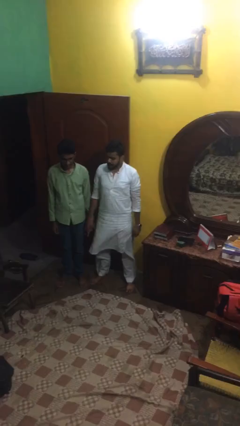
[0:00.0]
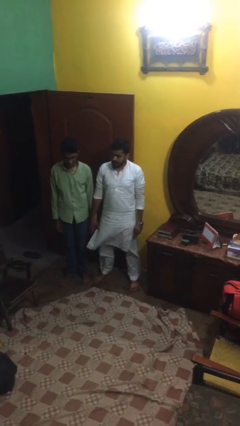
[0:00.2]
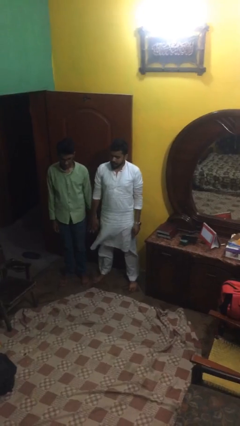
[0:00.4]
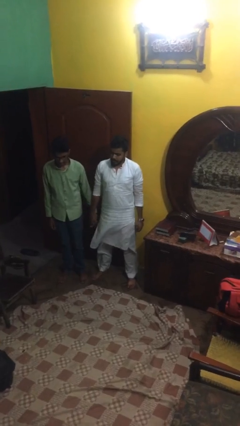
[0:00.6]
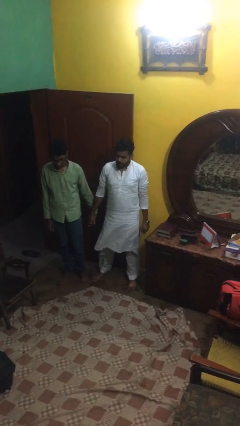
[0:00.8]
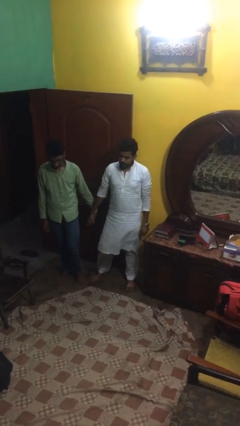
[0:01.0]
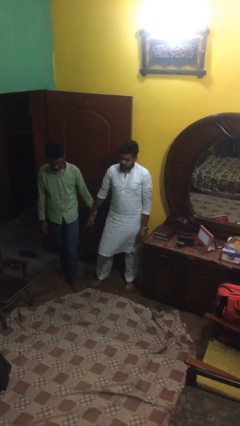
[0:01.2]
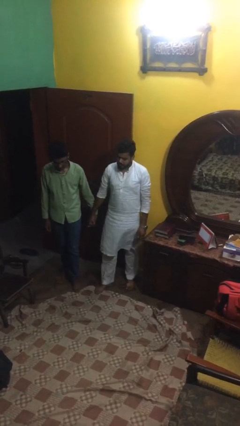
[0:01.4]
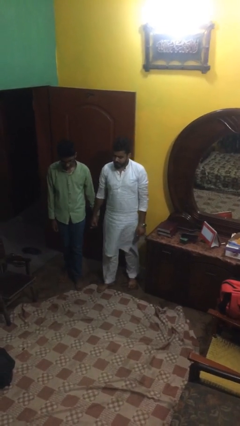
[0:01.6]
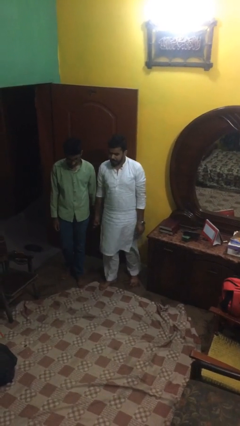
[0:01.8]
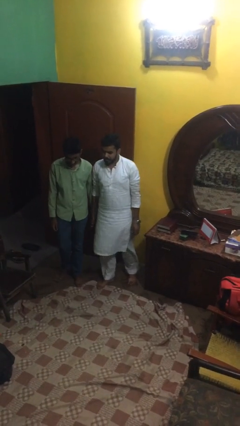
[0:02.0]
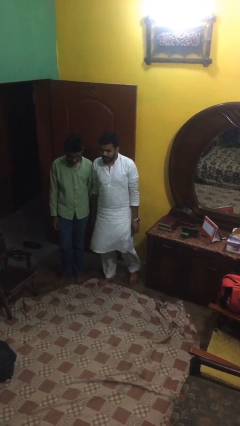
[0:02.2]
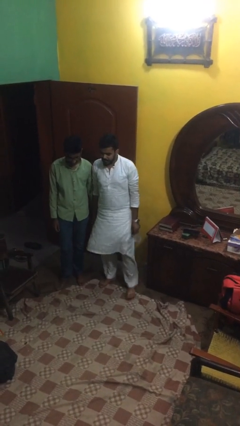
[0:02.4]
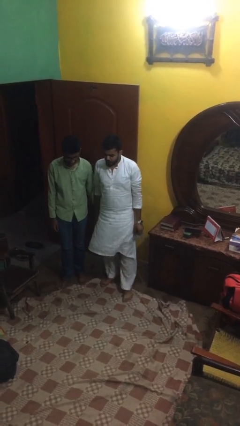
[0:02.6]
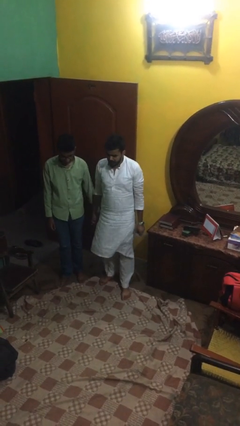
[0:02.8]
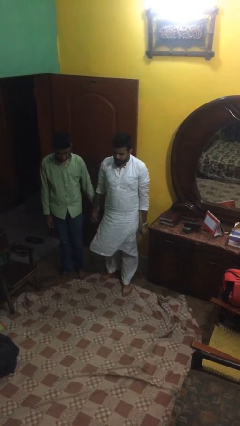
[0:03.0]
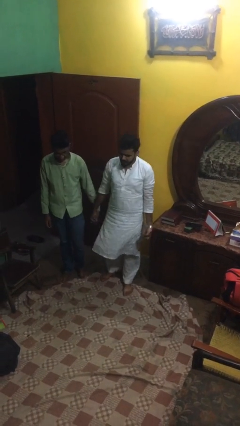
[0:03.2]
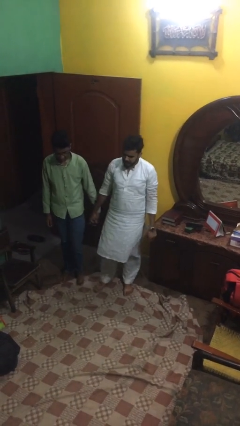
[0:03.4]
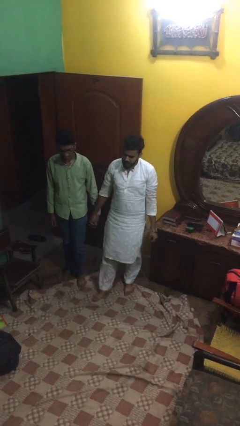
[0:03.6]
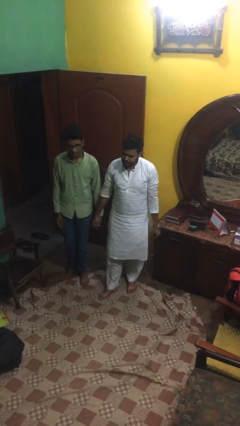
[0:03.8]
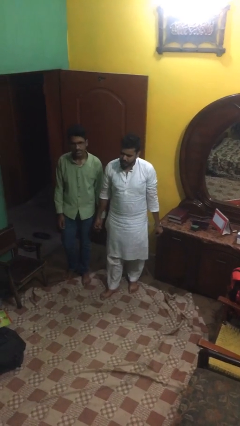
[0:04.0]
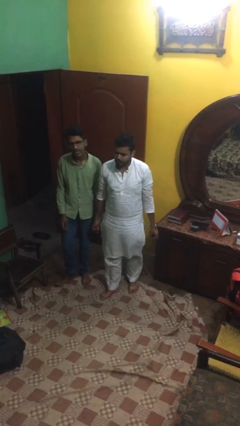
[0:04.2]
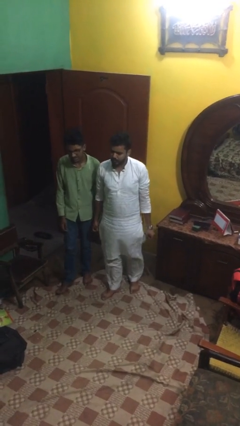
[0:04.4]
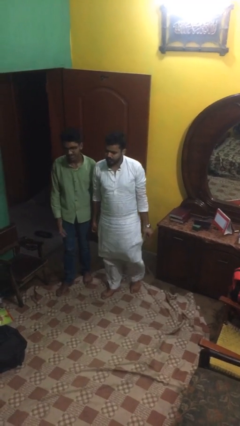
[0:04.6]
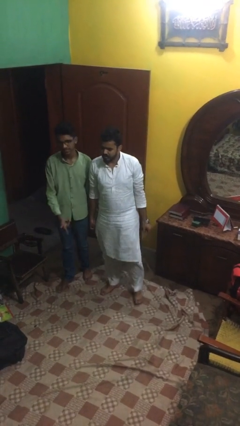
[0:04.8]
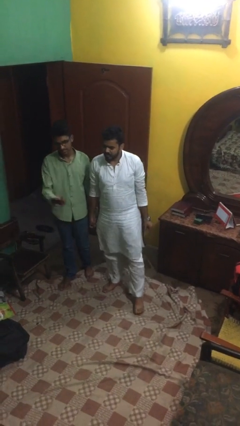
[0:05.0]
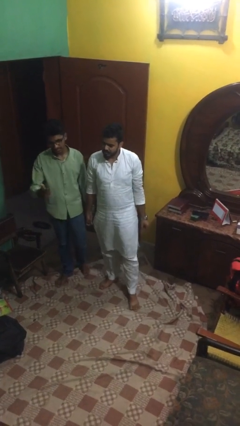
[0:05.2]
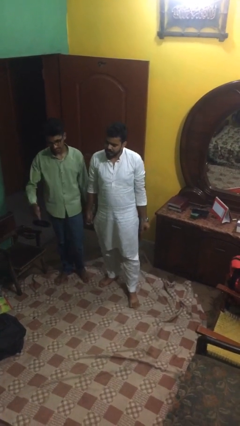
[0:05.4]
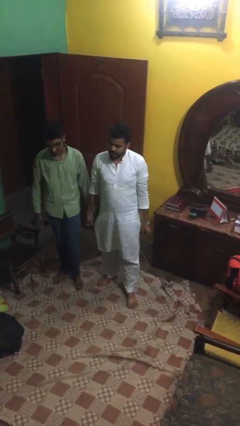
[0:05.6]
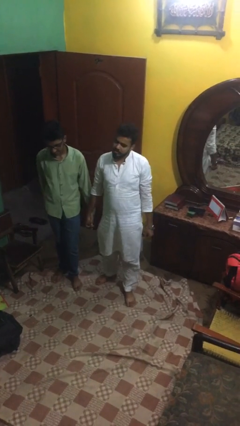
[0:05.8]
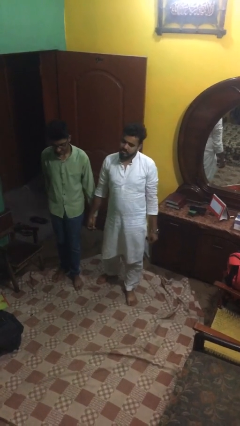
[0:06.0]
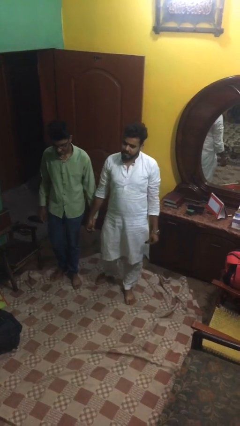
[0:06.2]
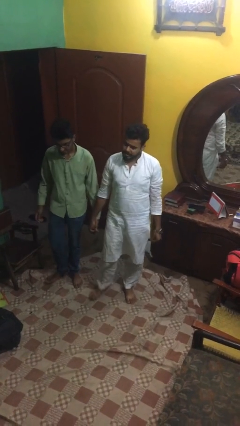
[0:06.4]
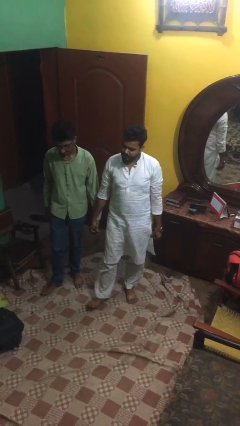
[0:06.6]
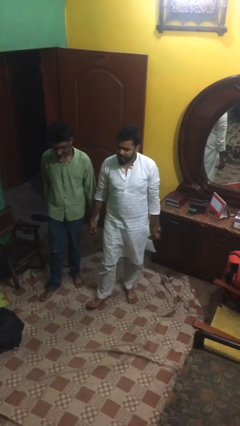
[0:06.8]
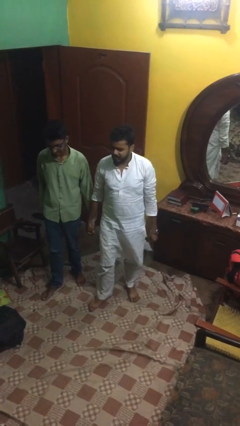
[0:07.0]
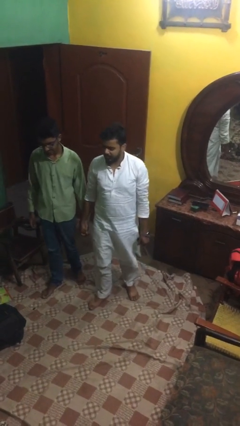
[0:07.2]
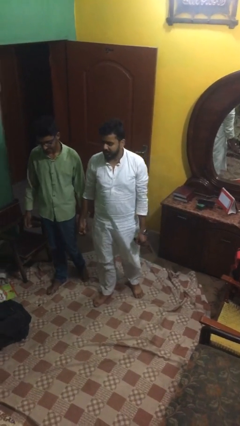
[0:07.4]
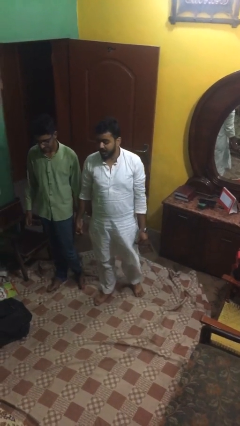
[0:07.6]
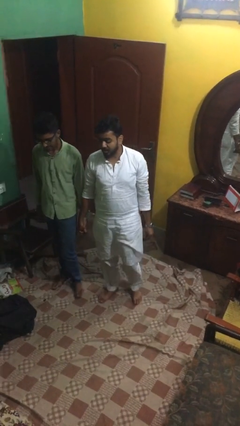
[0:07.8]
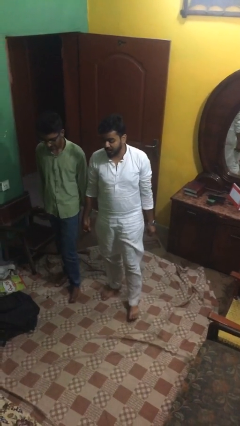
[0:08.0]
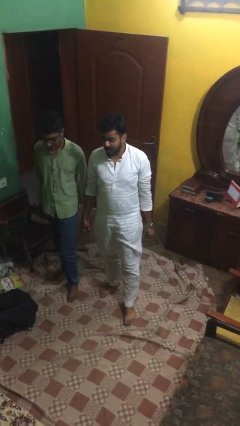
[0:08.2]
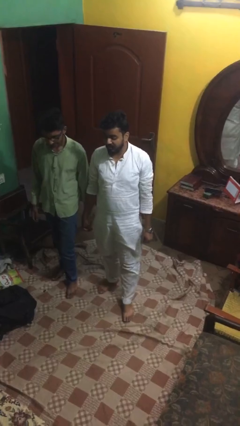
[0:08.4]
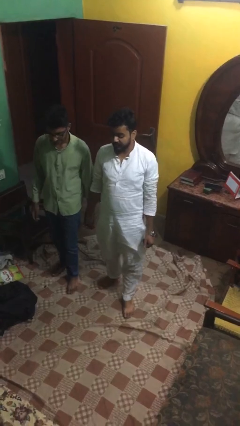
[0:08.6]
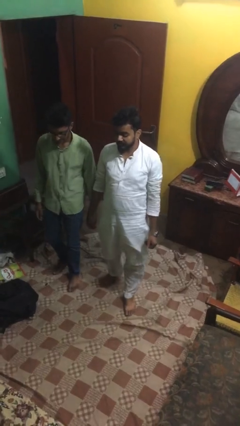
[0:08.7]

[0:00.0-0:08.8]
person holds hand

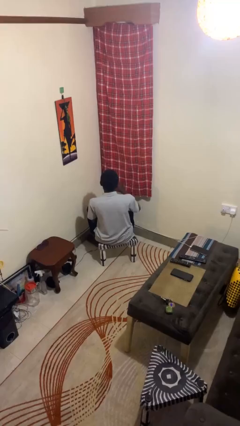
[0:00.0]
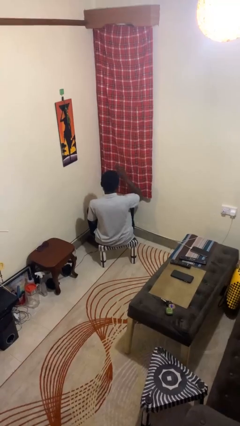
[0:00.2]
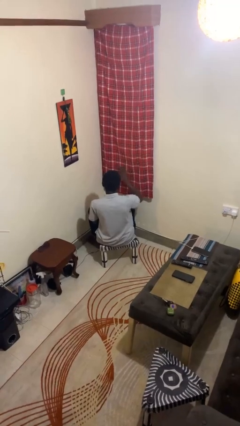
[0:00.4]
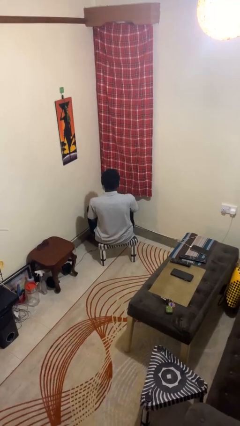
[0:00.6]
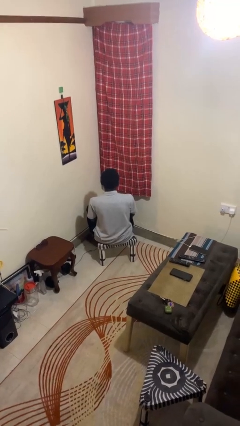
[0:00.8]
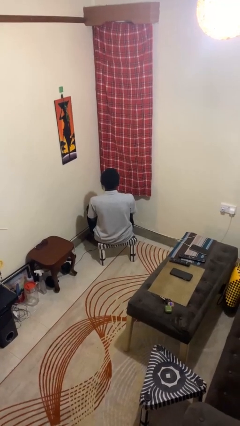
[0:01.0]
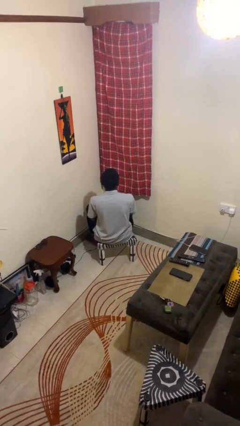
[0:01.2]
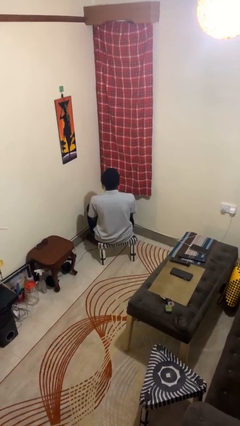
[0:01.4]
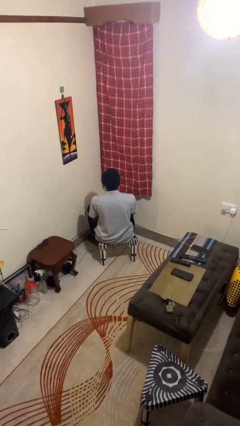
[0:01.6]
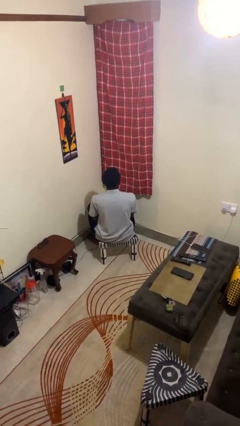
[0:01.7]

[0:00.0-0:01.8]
person gestures swipe down

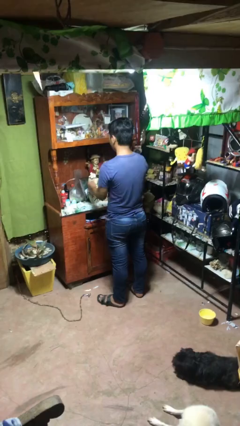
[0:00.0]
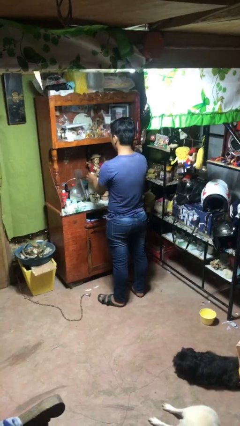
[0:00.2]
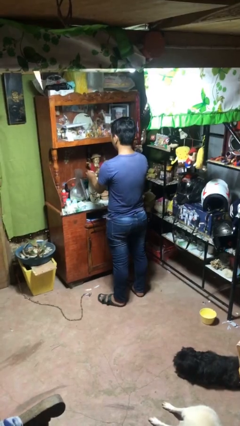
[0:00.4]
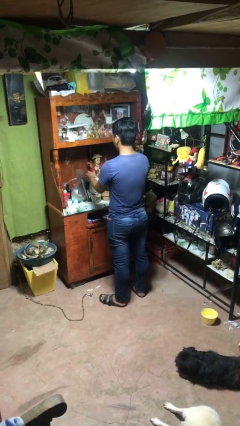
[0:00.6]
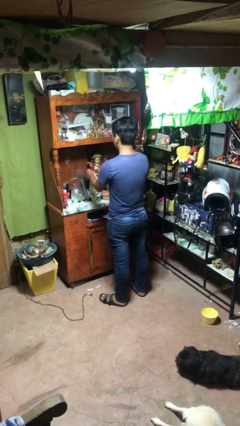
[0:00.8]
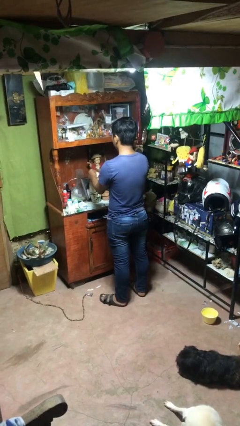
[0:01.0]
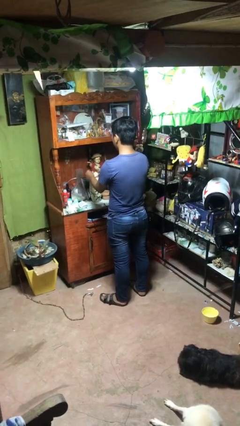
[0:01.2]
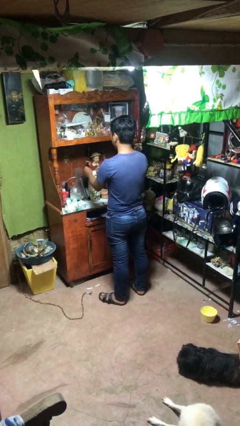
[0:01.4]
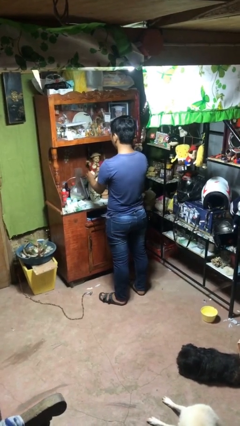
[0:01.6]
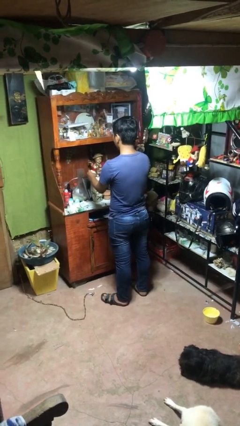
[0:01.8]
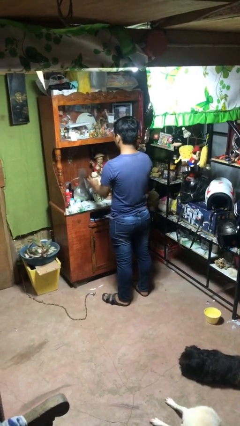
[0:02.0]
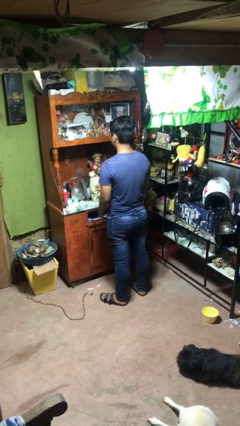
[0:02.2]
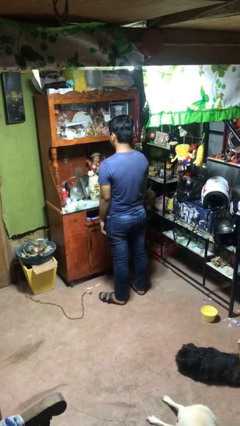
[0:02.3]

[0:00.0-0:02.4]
person arranges flowers in vase

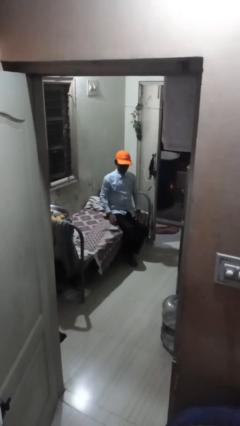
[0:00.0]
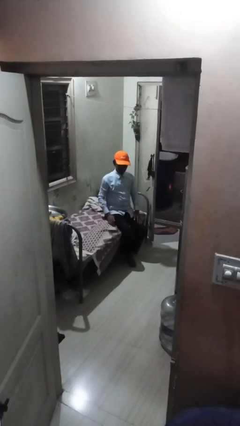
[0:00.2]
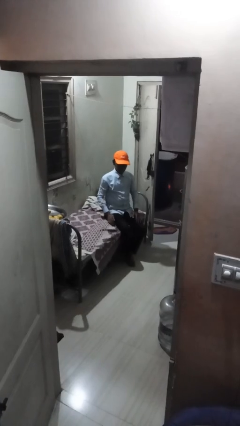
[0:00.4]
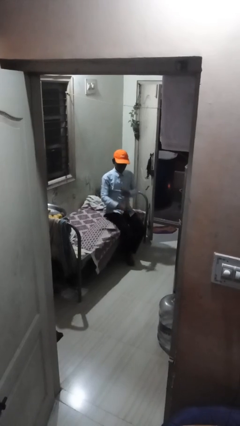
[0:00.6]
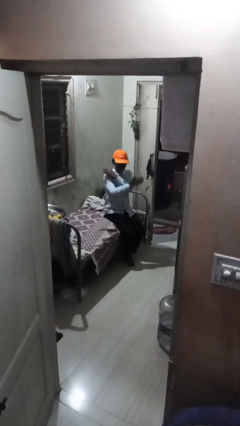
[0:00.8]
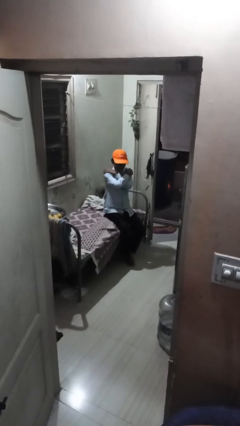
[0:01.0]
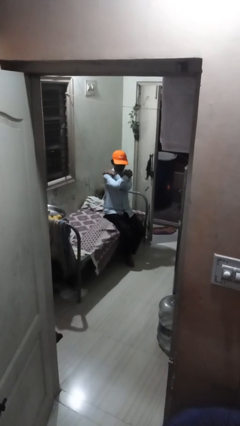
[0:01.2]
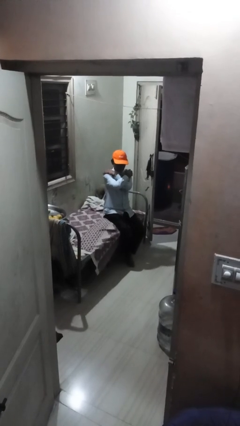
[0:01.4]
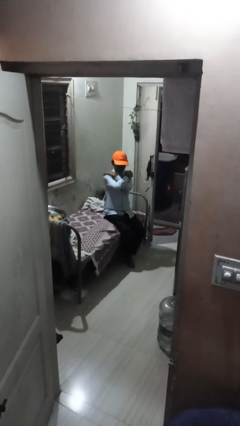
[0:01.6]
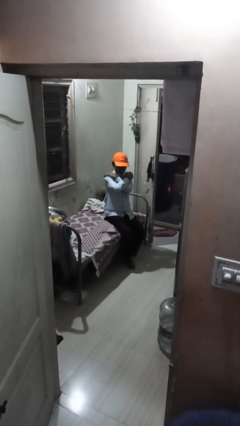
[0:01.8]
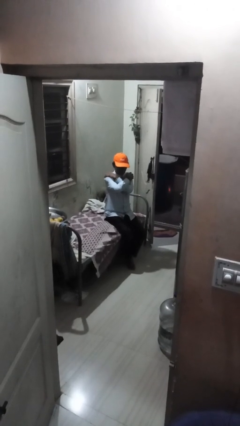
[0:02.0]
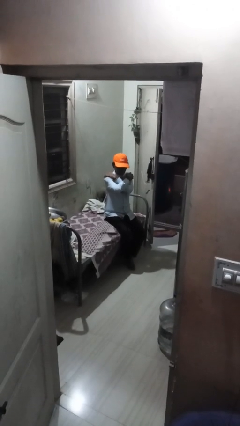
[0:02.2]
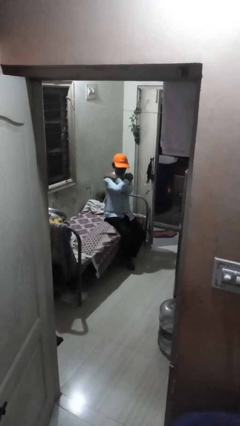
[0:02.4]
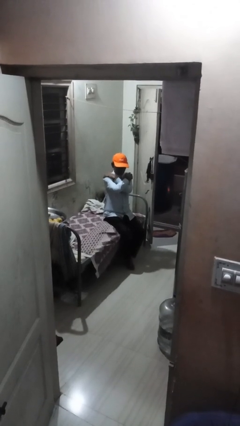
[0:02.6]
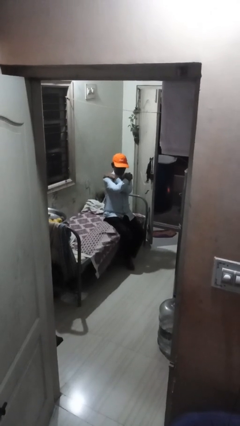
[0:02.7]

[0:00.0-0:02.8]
person gestures arms x

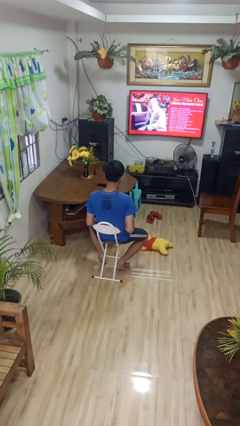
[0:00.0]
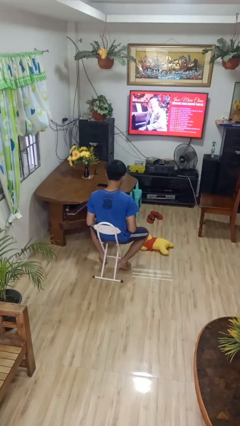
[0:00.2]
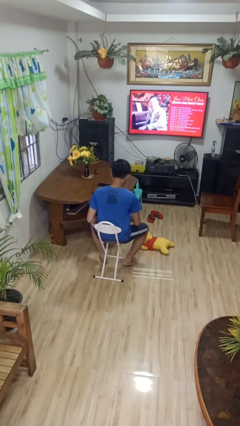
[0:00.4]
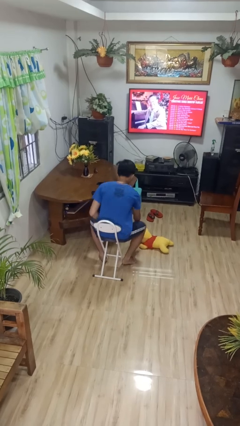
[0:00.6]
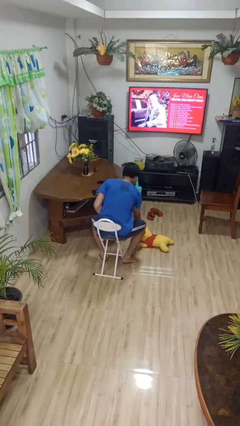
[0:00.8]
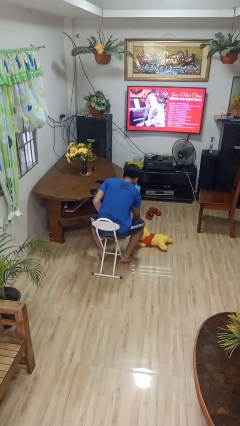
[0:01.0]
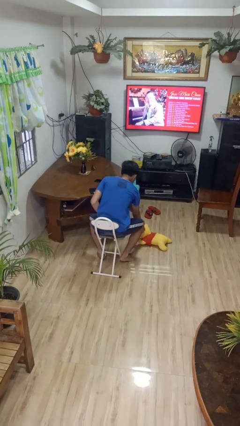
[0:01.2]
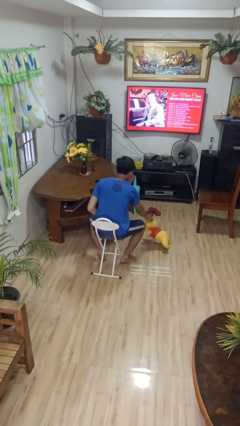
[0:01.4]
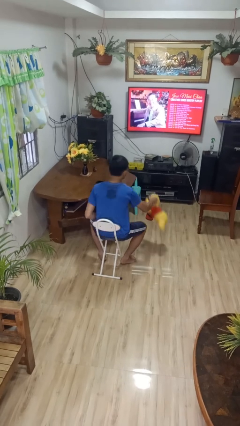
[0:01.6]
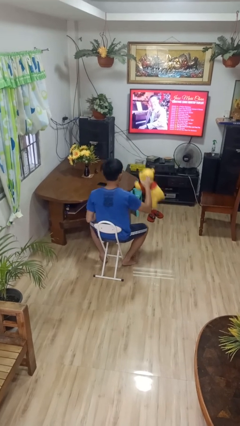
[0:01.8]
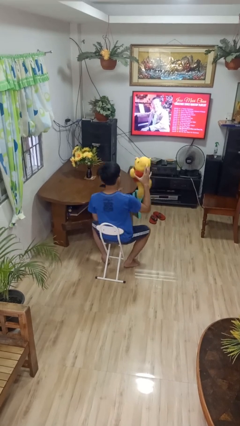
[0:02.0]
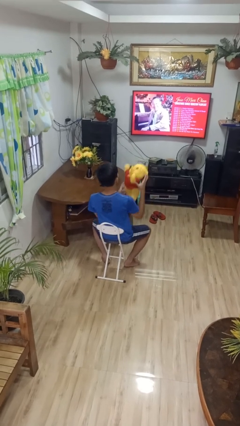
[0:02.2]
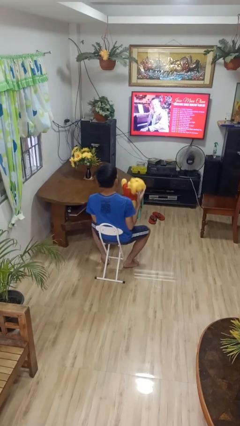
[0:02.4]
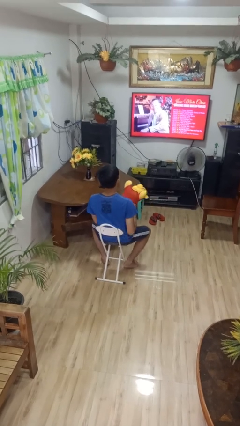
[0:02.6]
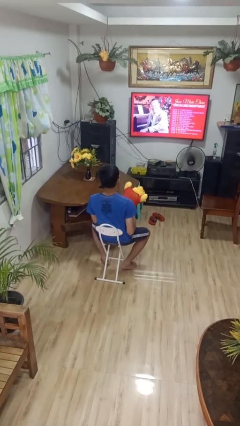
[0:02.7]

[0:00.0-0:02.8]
person picks up object from floor
